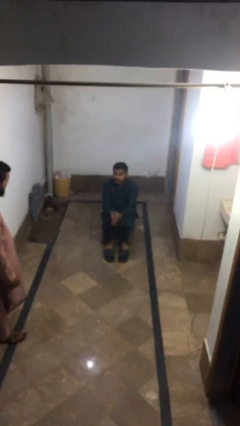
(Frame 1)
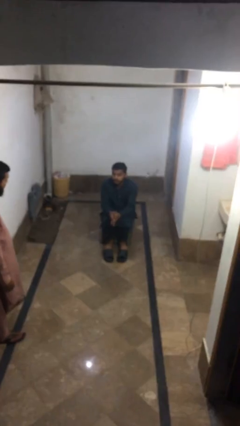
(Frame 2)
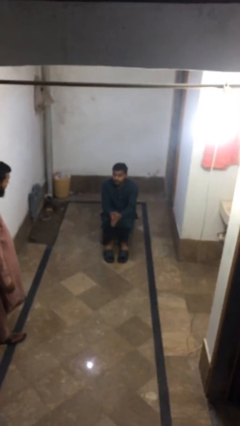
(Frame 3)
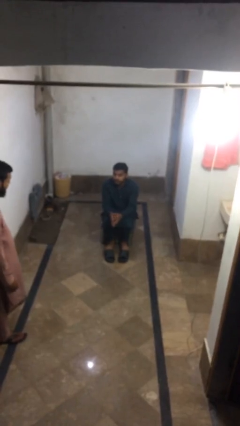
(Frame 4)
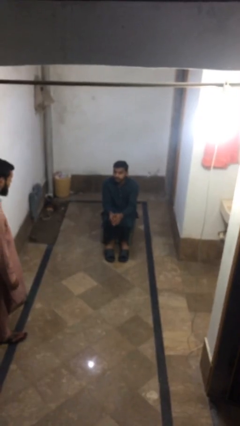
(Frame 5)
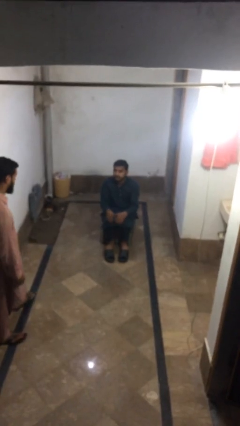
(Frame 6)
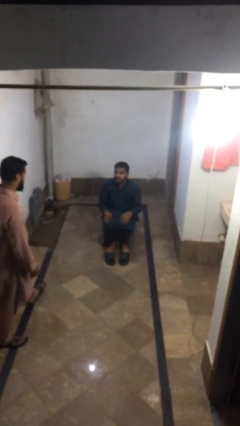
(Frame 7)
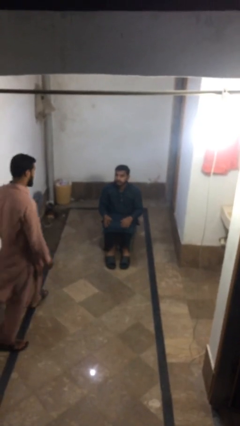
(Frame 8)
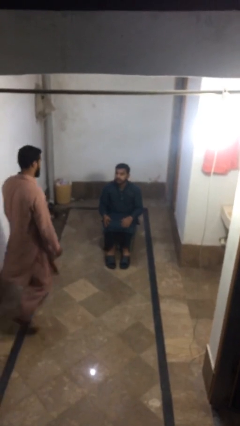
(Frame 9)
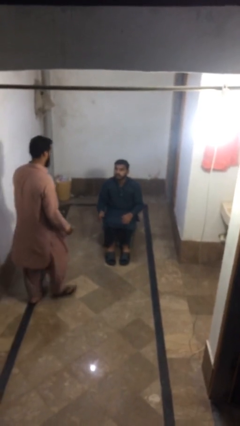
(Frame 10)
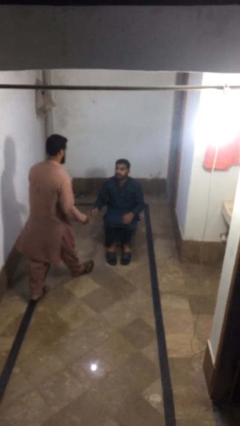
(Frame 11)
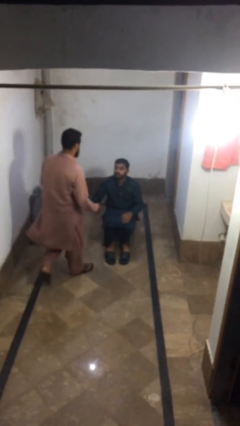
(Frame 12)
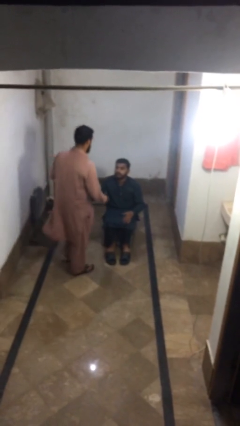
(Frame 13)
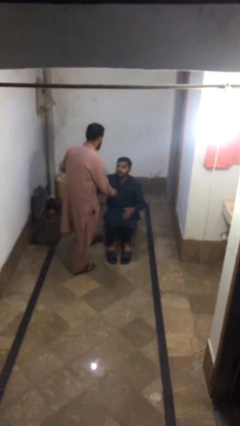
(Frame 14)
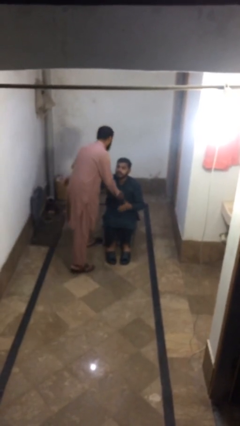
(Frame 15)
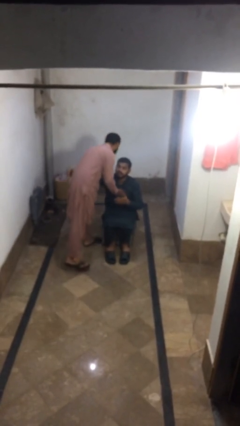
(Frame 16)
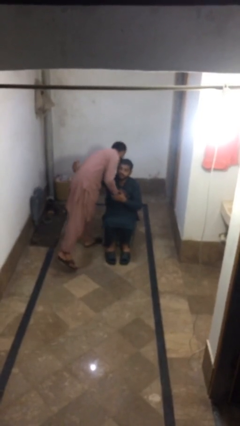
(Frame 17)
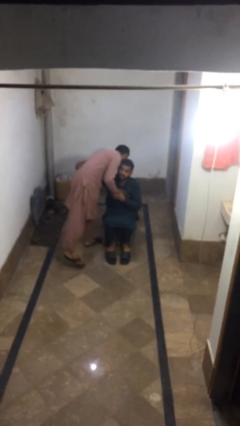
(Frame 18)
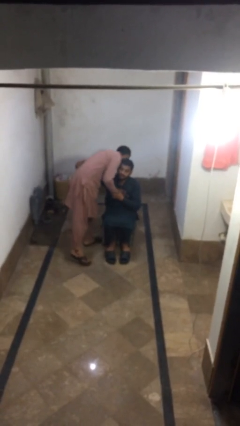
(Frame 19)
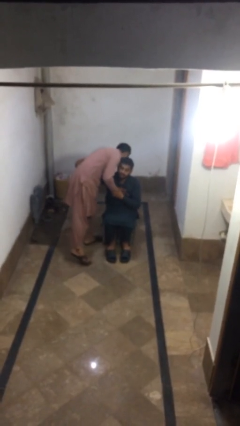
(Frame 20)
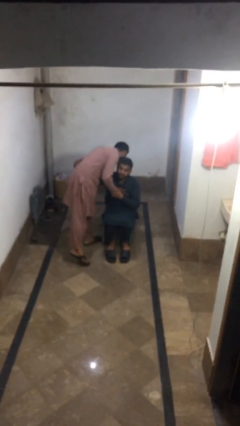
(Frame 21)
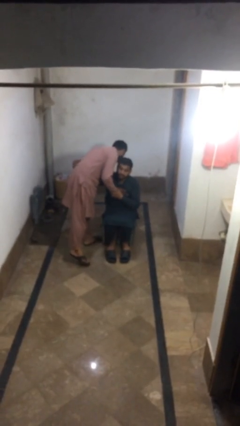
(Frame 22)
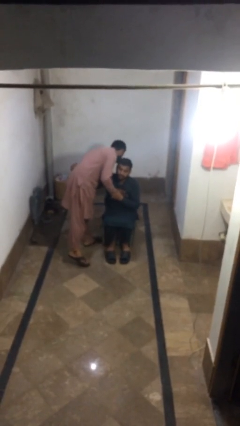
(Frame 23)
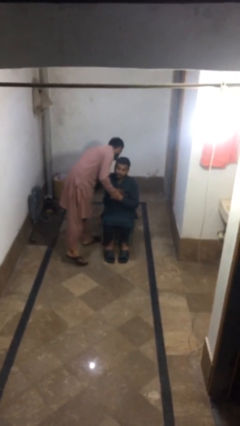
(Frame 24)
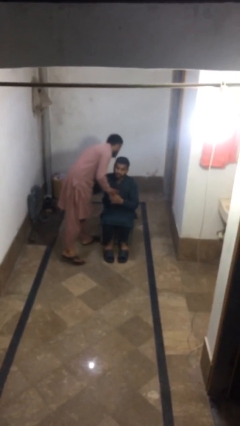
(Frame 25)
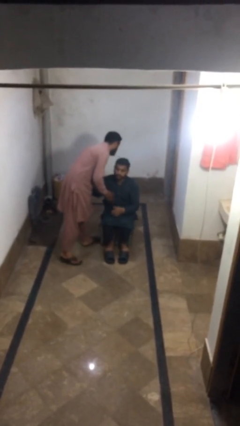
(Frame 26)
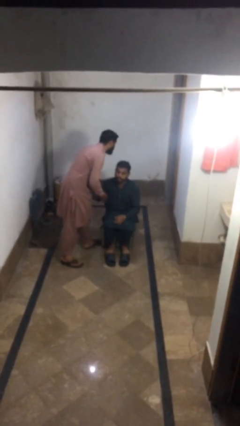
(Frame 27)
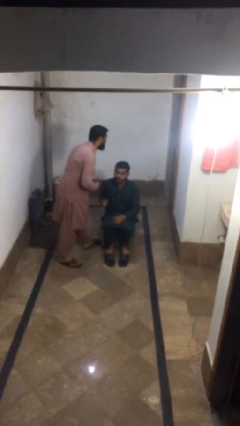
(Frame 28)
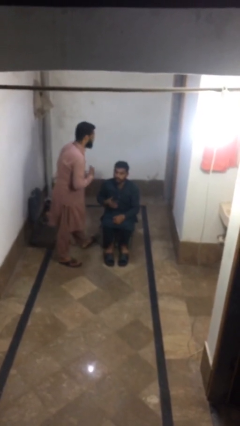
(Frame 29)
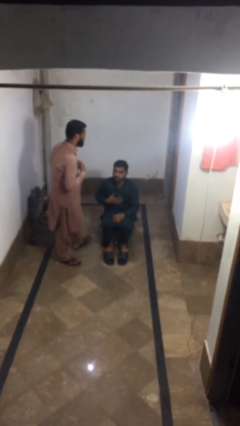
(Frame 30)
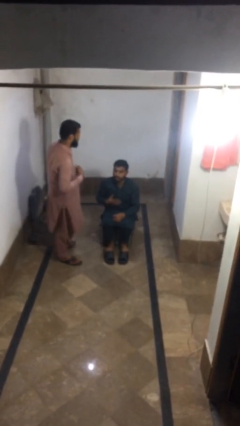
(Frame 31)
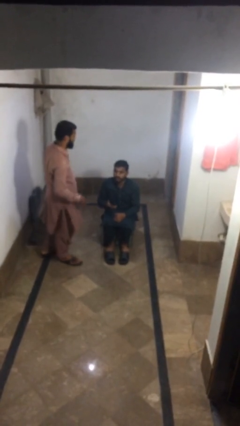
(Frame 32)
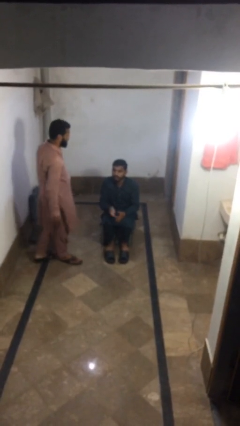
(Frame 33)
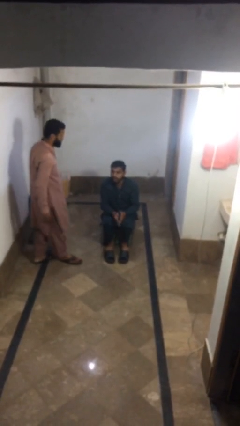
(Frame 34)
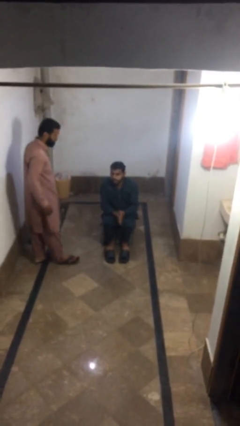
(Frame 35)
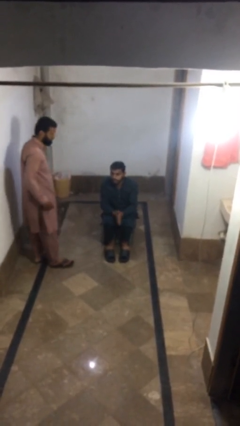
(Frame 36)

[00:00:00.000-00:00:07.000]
person embraces person

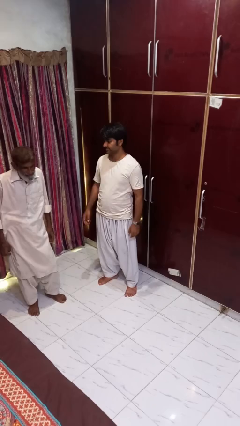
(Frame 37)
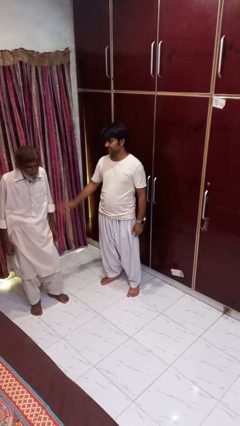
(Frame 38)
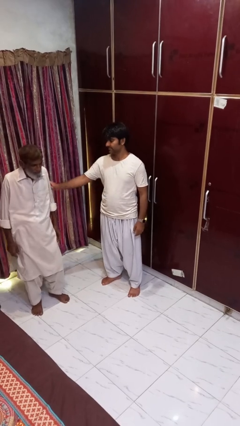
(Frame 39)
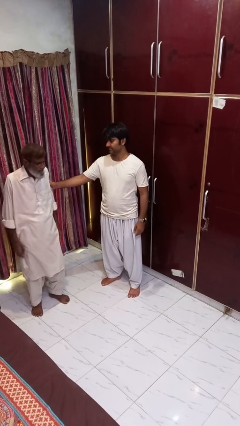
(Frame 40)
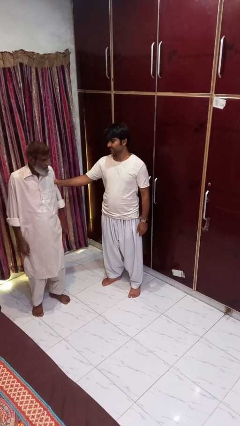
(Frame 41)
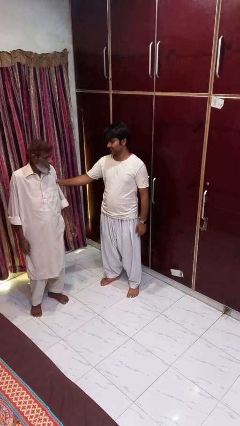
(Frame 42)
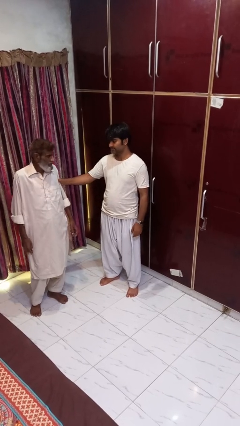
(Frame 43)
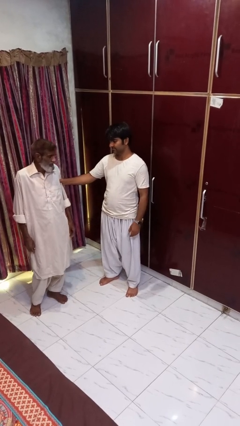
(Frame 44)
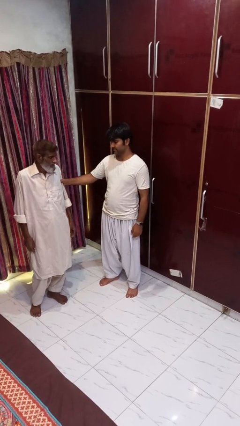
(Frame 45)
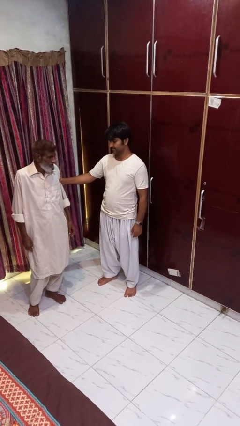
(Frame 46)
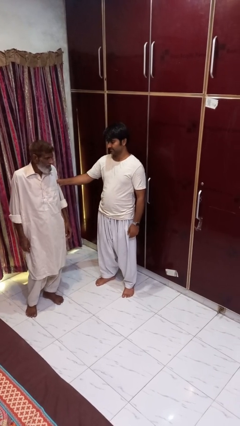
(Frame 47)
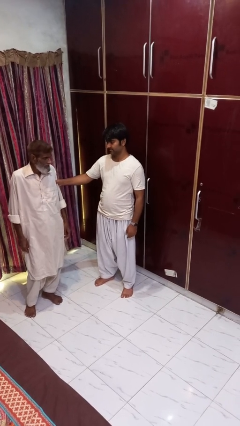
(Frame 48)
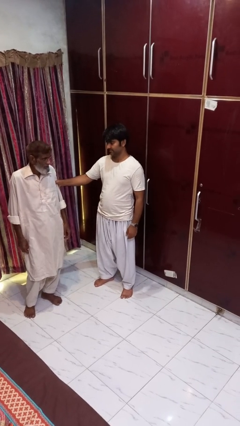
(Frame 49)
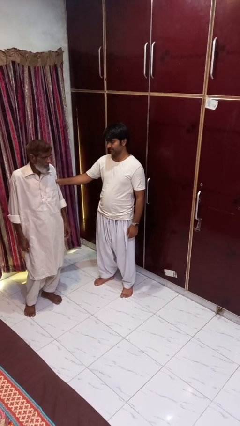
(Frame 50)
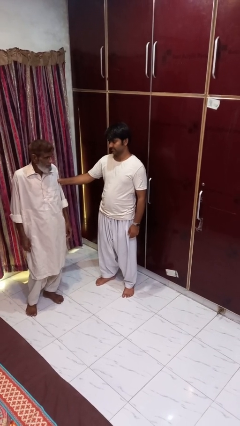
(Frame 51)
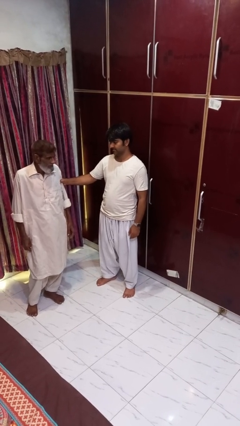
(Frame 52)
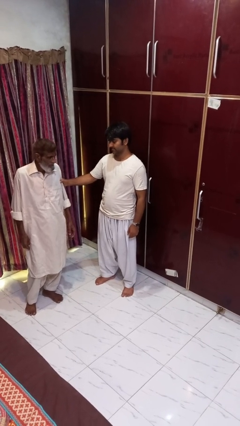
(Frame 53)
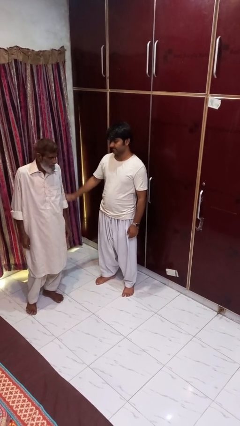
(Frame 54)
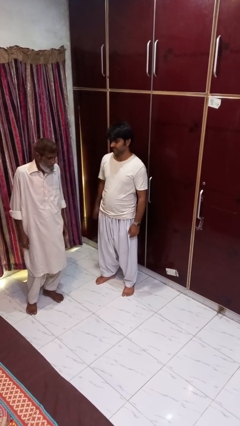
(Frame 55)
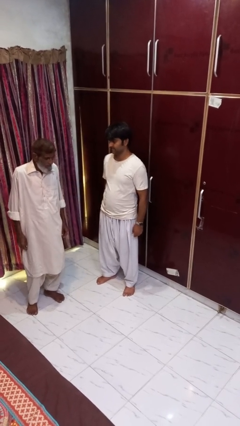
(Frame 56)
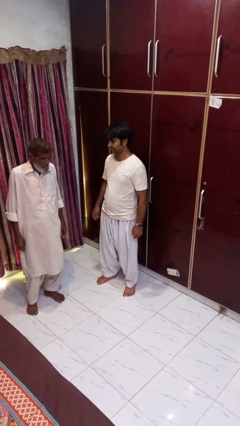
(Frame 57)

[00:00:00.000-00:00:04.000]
person grabs person by bicep

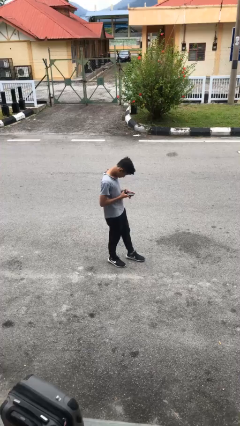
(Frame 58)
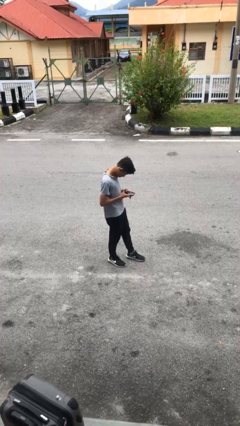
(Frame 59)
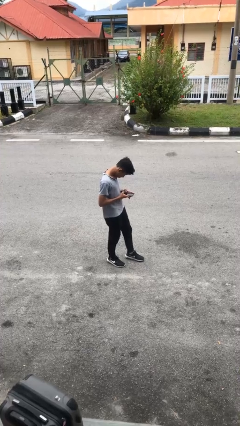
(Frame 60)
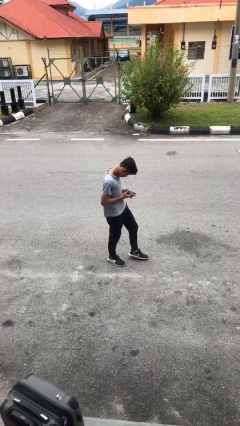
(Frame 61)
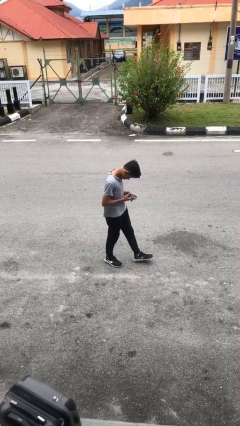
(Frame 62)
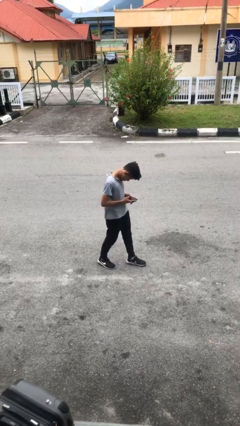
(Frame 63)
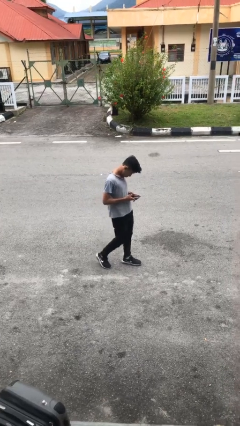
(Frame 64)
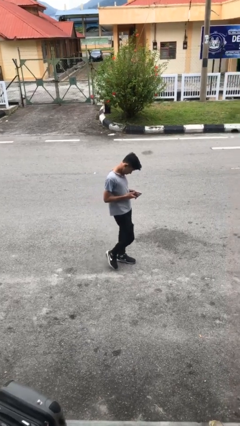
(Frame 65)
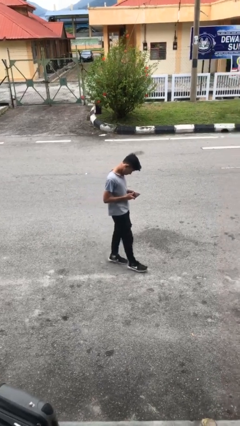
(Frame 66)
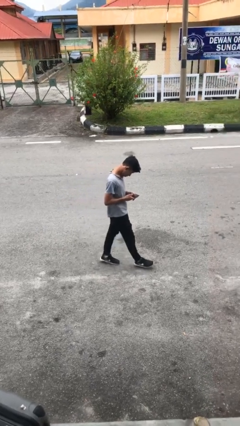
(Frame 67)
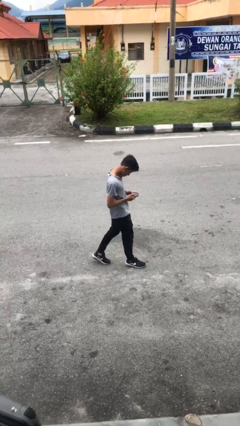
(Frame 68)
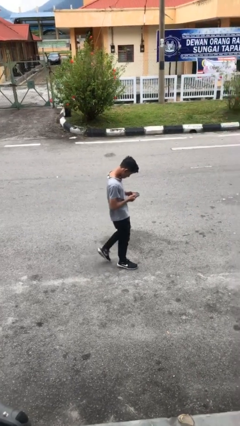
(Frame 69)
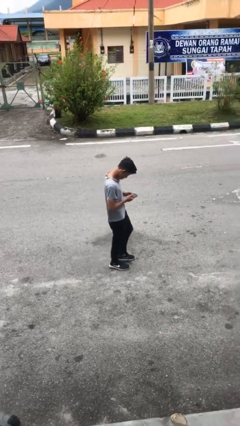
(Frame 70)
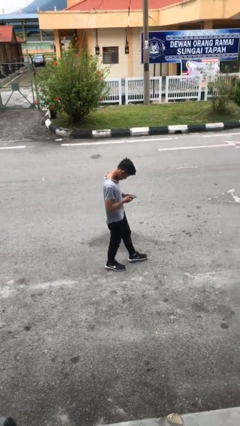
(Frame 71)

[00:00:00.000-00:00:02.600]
person texts on phone

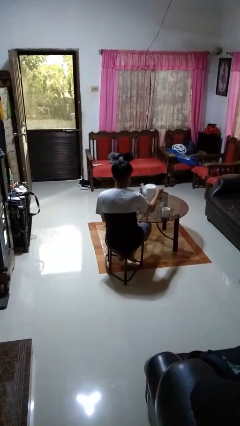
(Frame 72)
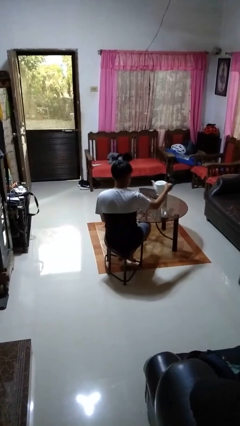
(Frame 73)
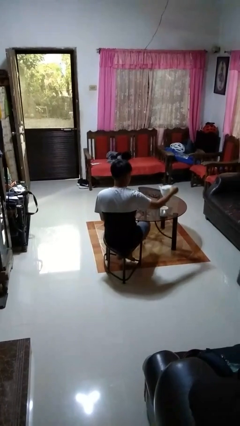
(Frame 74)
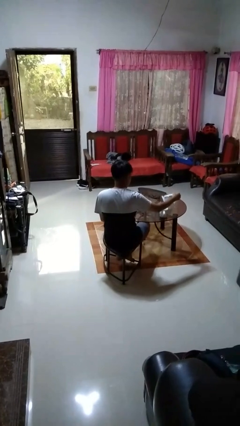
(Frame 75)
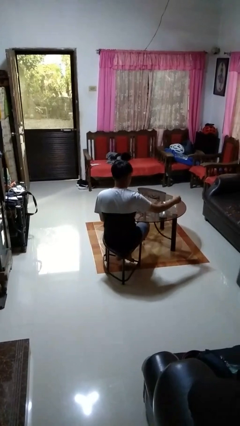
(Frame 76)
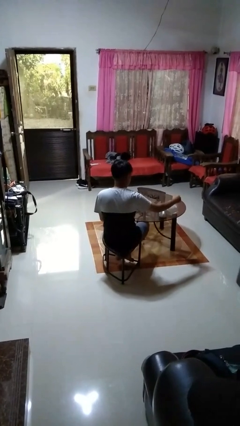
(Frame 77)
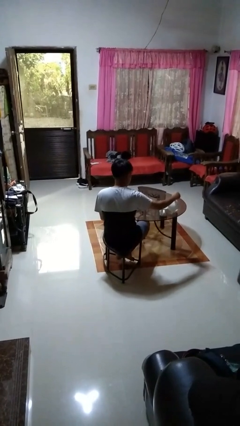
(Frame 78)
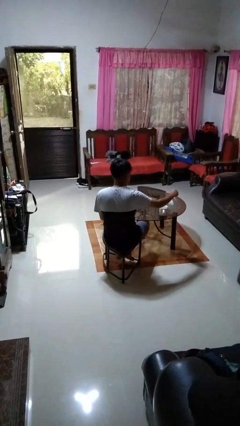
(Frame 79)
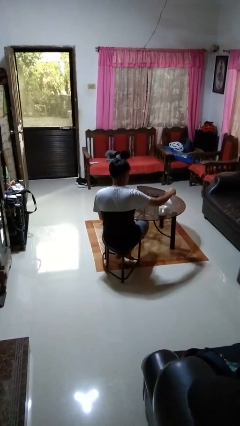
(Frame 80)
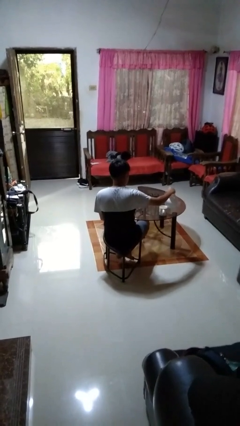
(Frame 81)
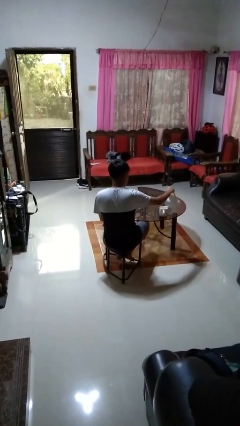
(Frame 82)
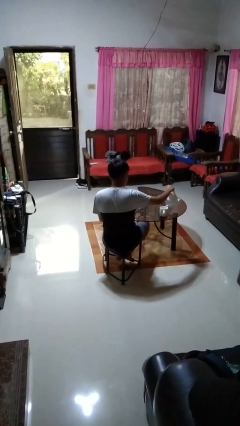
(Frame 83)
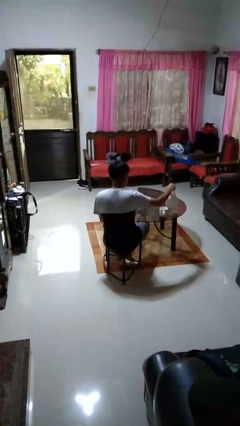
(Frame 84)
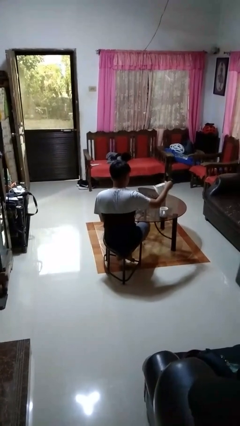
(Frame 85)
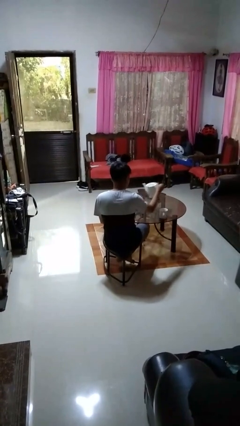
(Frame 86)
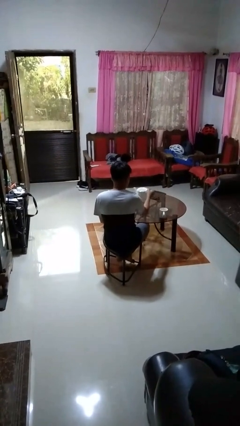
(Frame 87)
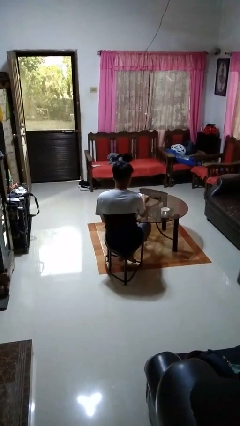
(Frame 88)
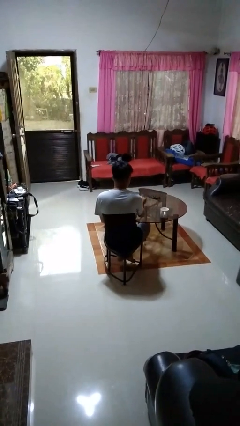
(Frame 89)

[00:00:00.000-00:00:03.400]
person pours coffee into mug

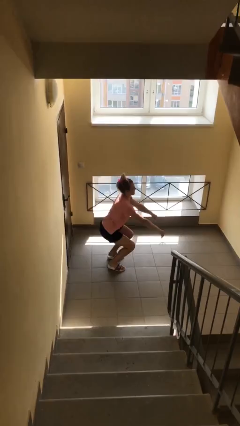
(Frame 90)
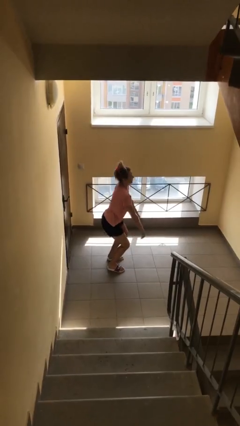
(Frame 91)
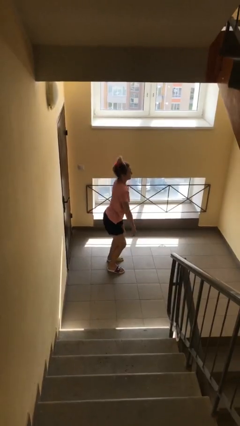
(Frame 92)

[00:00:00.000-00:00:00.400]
person stands up

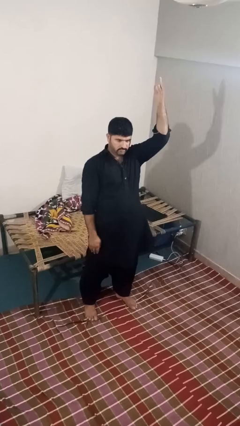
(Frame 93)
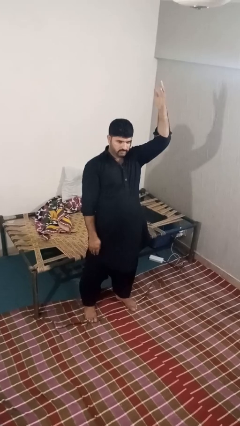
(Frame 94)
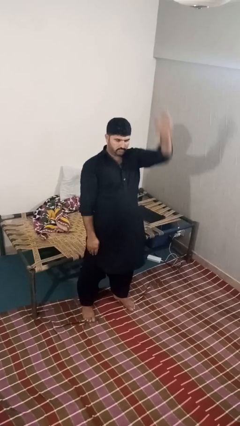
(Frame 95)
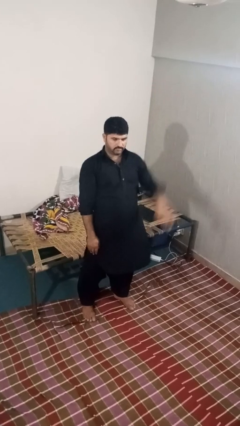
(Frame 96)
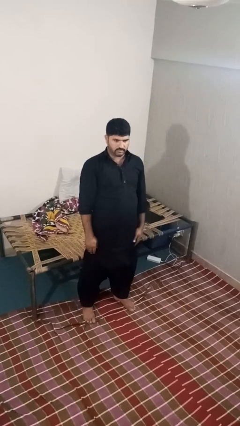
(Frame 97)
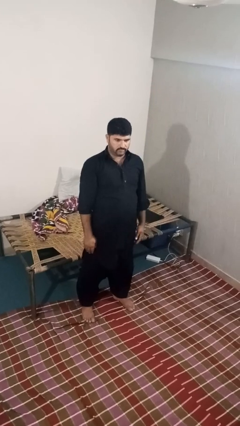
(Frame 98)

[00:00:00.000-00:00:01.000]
person gestures swipe down
